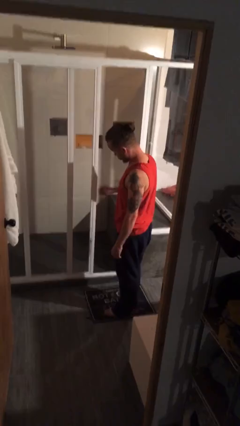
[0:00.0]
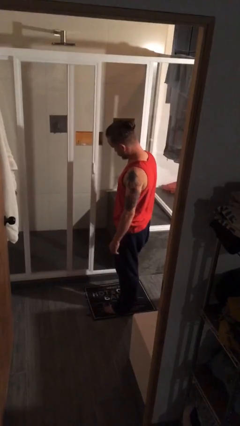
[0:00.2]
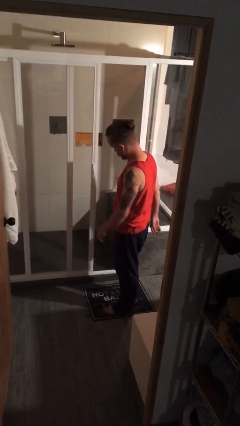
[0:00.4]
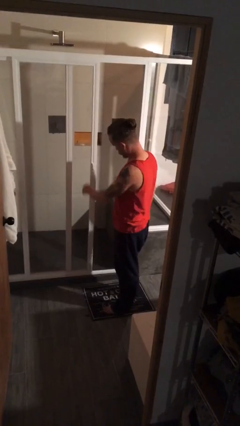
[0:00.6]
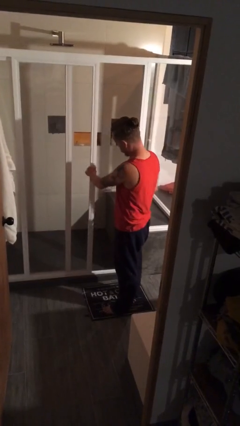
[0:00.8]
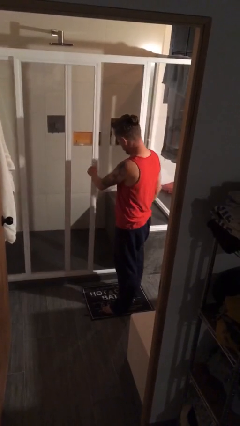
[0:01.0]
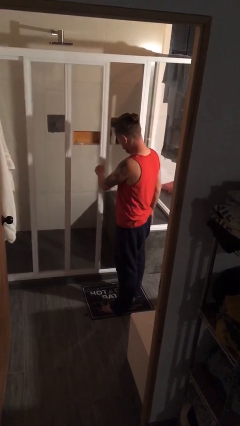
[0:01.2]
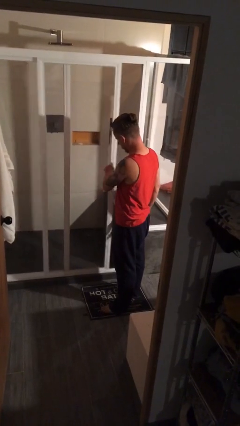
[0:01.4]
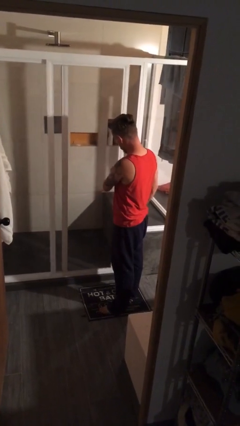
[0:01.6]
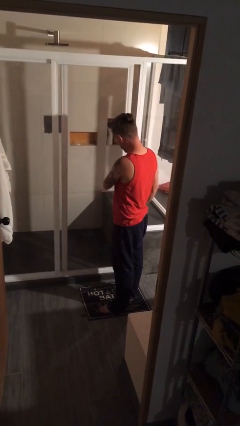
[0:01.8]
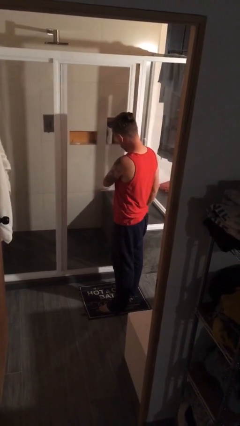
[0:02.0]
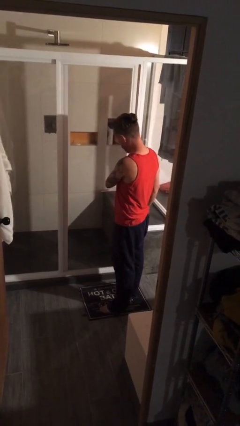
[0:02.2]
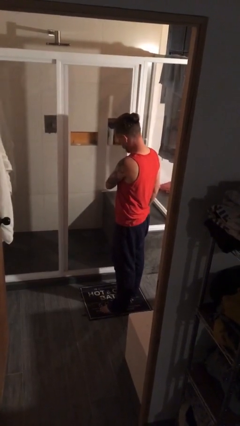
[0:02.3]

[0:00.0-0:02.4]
person closes sliding door

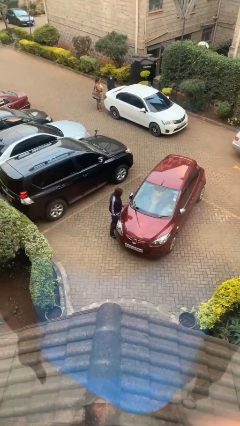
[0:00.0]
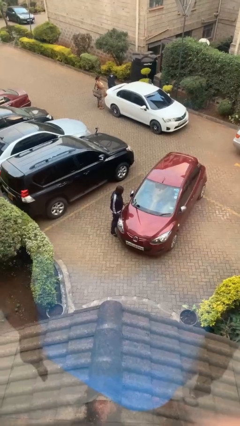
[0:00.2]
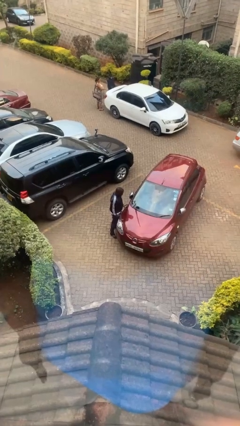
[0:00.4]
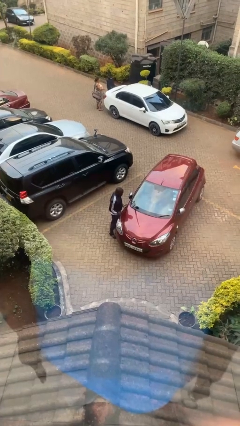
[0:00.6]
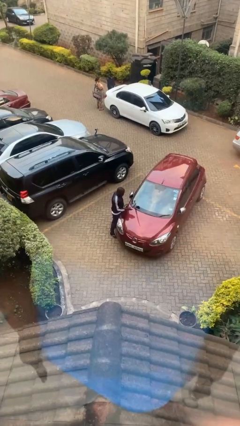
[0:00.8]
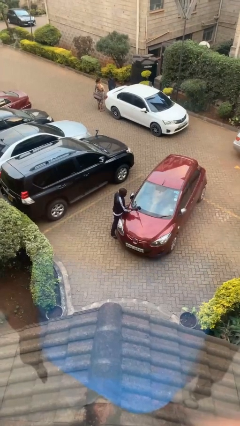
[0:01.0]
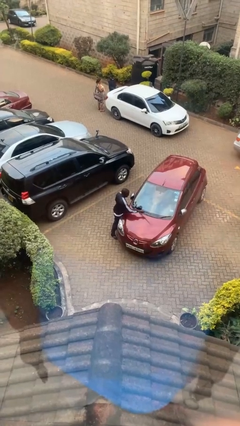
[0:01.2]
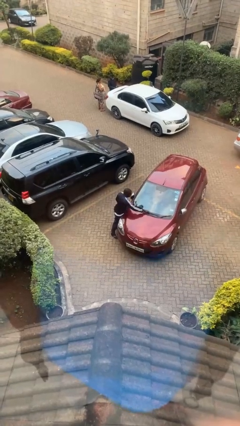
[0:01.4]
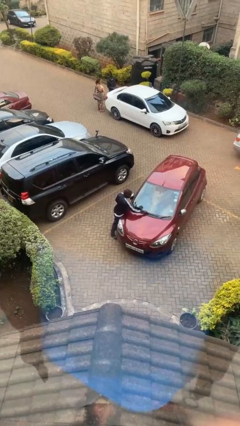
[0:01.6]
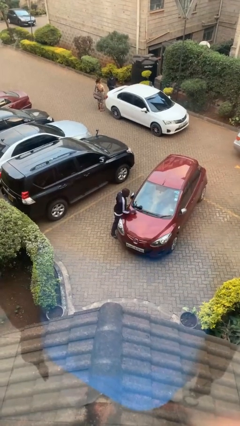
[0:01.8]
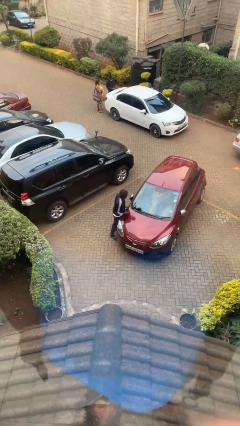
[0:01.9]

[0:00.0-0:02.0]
person flips down car wipers

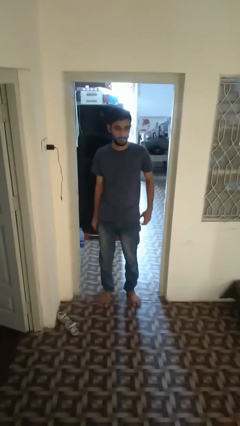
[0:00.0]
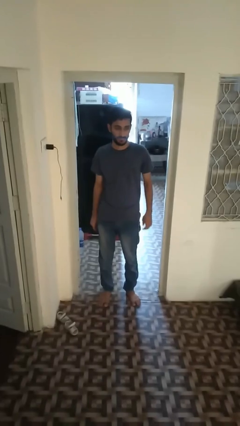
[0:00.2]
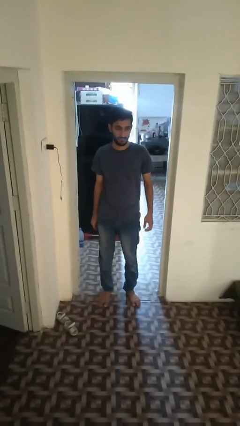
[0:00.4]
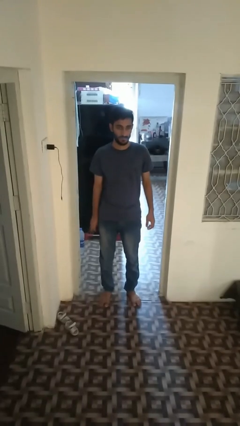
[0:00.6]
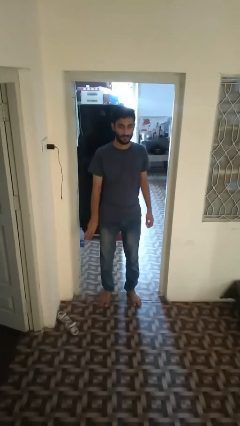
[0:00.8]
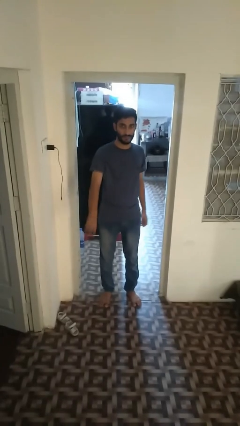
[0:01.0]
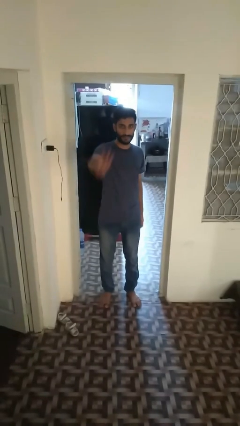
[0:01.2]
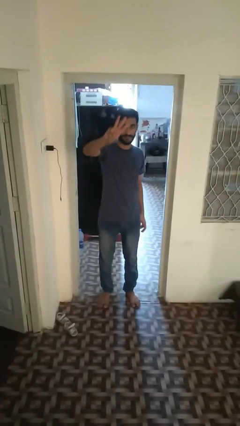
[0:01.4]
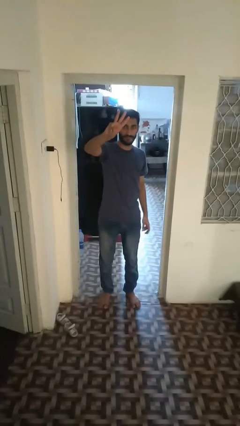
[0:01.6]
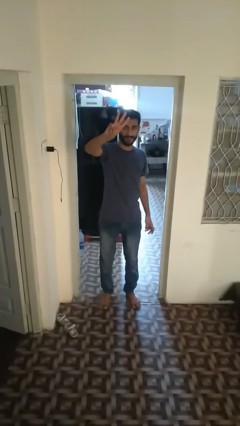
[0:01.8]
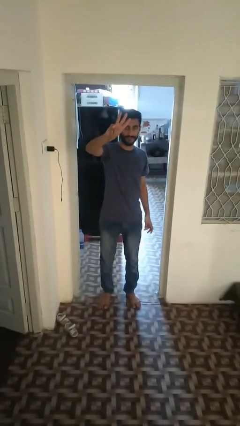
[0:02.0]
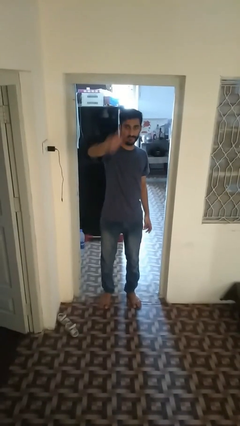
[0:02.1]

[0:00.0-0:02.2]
person gestures number three

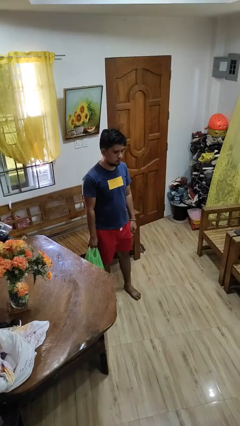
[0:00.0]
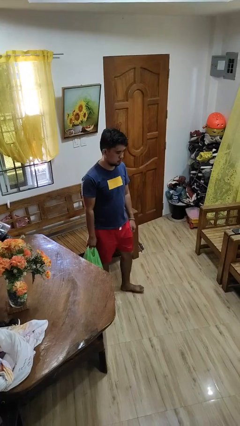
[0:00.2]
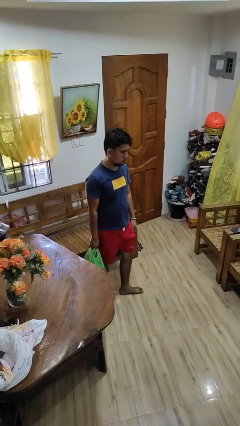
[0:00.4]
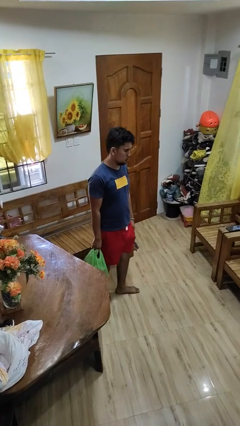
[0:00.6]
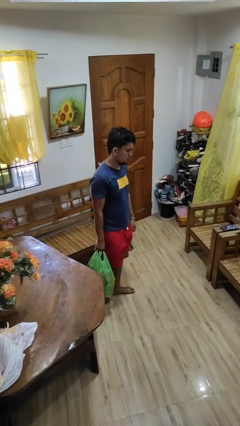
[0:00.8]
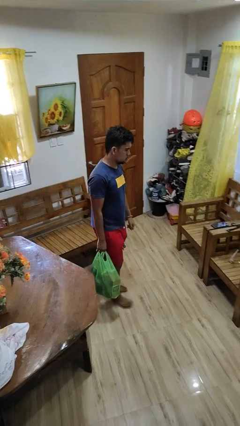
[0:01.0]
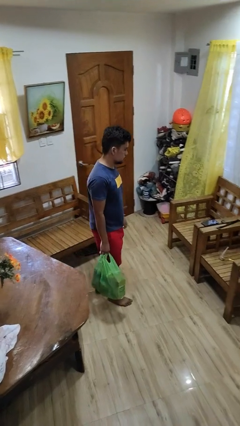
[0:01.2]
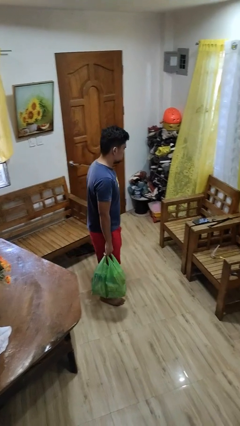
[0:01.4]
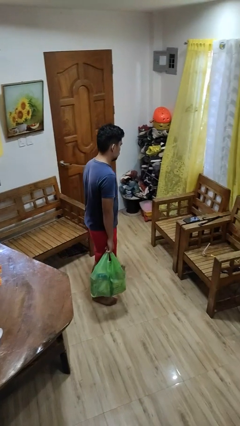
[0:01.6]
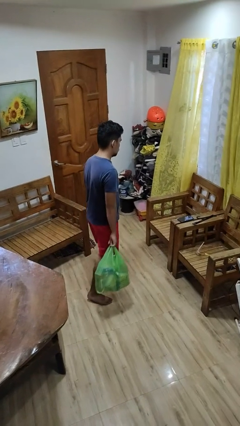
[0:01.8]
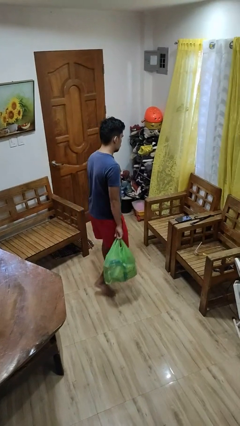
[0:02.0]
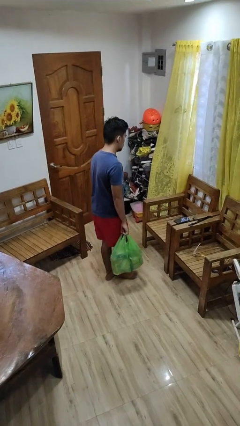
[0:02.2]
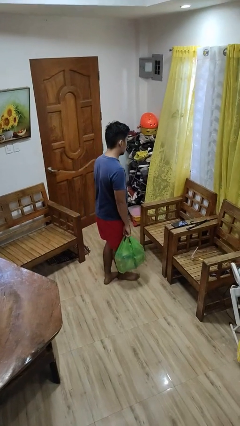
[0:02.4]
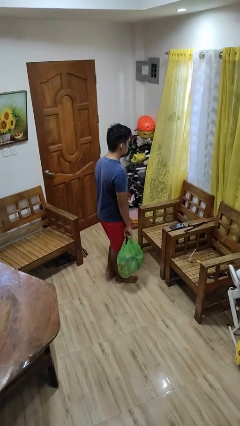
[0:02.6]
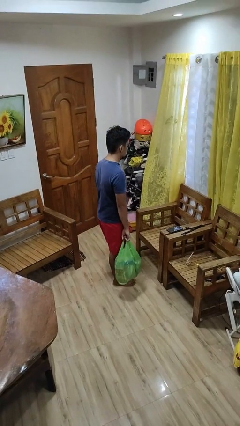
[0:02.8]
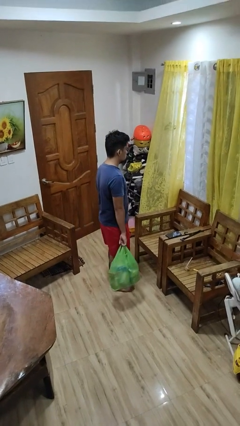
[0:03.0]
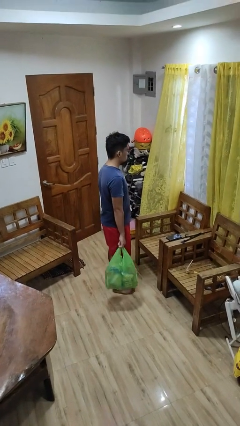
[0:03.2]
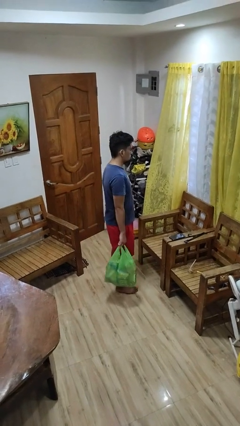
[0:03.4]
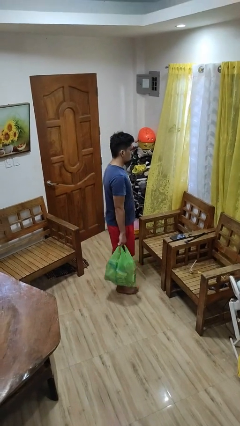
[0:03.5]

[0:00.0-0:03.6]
person carries groceries

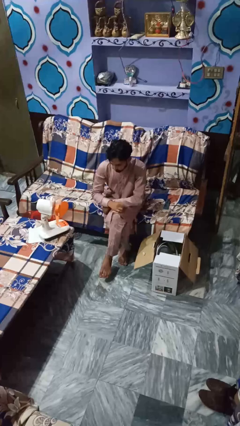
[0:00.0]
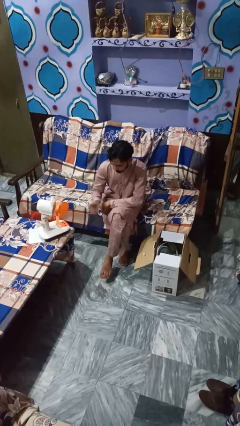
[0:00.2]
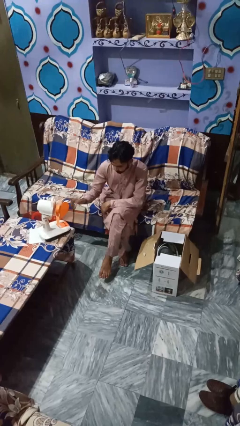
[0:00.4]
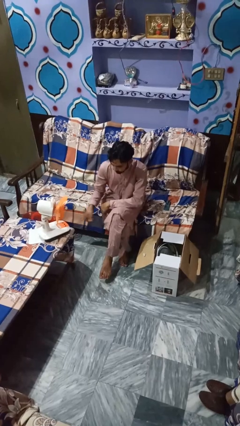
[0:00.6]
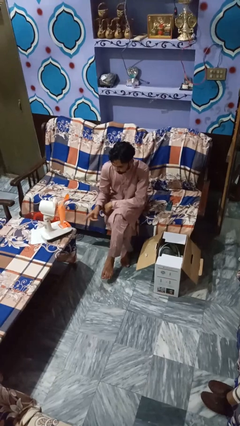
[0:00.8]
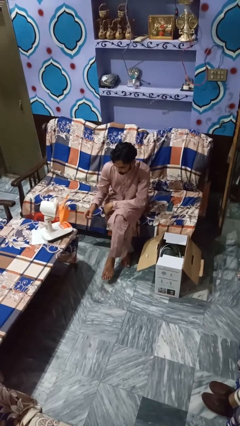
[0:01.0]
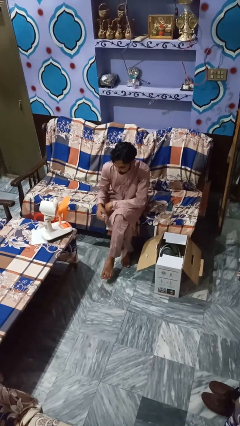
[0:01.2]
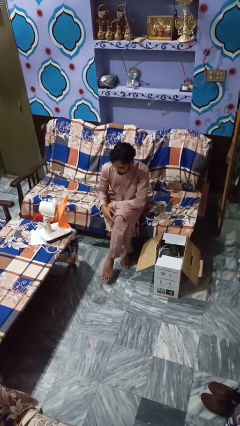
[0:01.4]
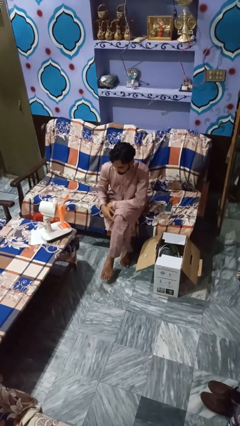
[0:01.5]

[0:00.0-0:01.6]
person turns on fan

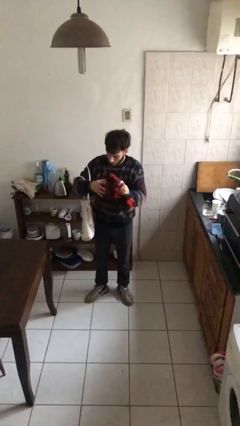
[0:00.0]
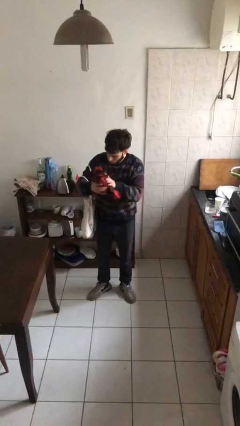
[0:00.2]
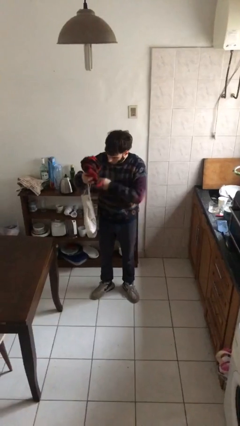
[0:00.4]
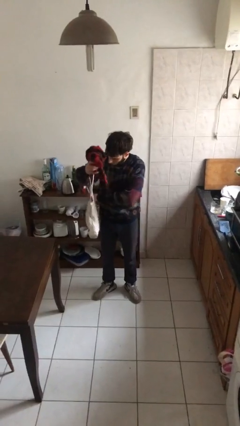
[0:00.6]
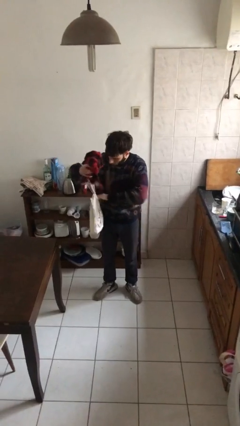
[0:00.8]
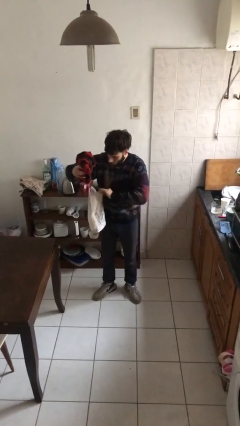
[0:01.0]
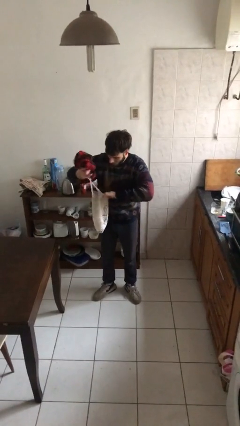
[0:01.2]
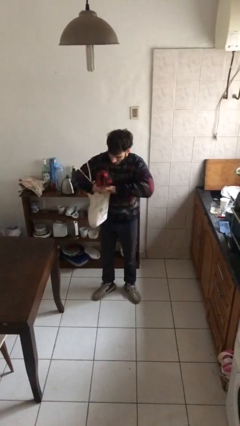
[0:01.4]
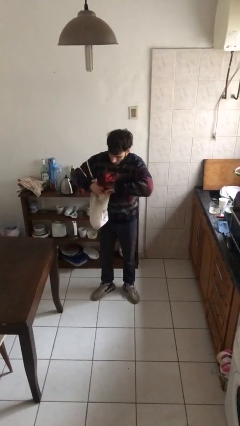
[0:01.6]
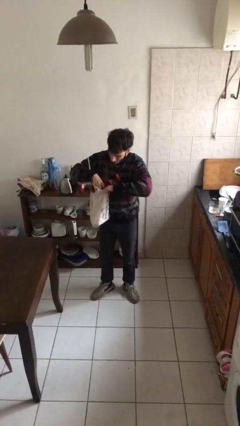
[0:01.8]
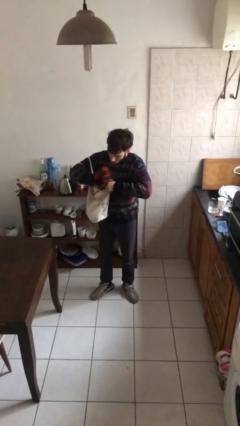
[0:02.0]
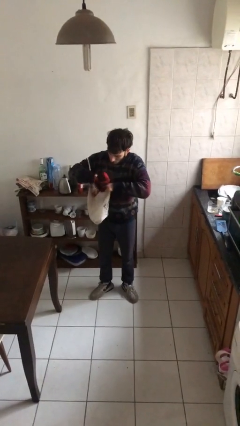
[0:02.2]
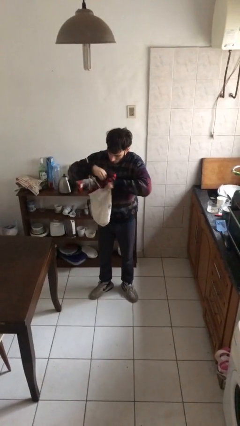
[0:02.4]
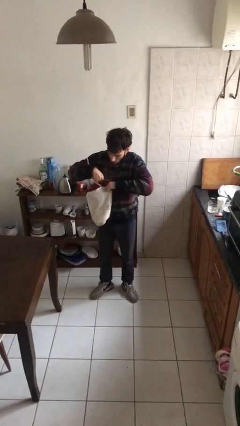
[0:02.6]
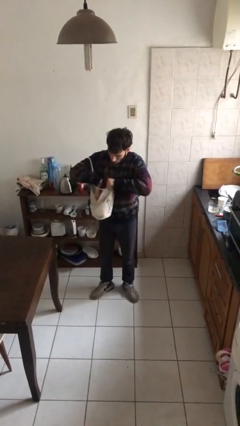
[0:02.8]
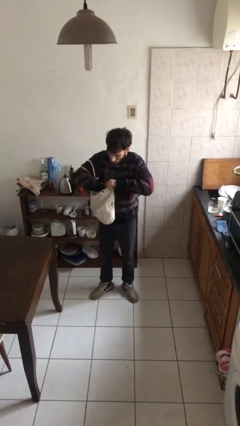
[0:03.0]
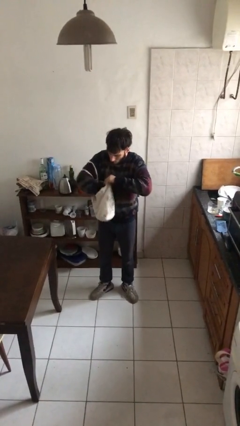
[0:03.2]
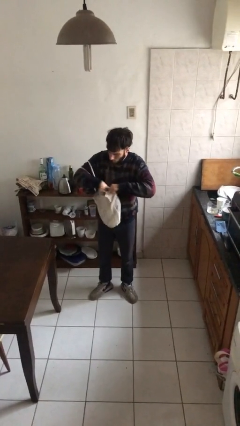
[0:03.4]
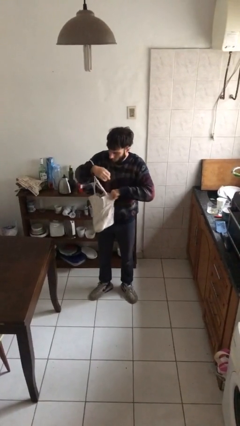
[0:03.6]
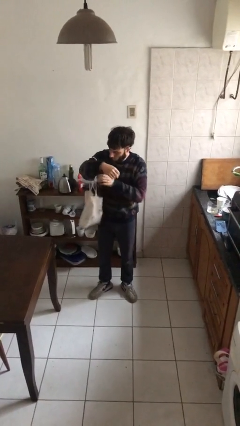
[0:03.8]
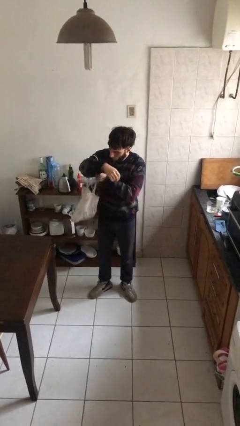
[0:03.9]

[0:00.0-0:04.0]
person puts object into purse

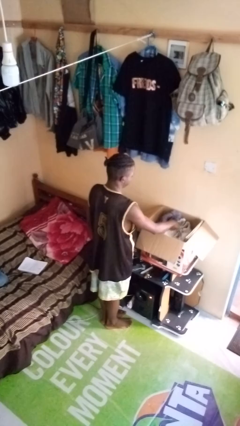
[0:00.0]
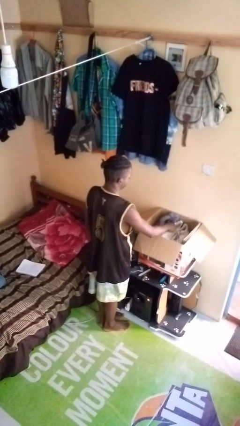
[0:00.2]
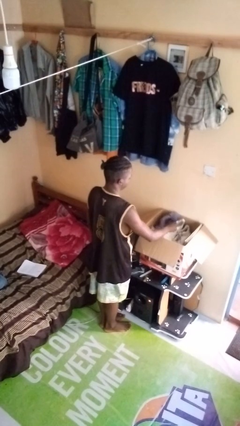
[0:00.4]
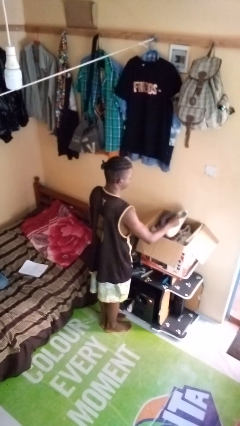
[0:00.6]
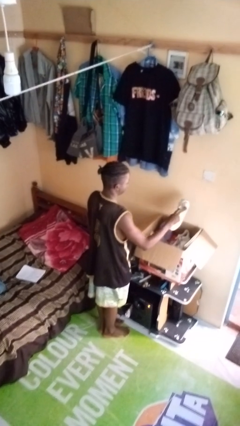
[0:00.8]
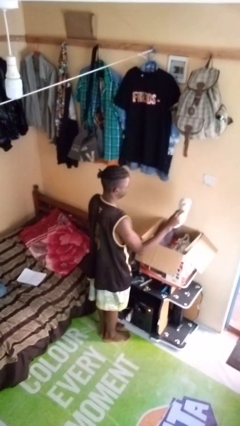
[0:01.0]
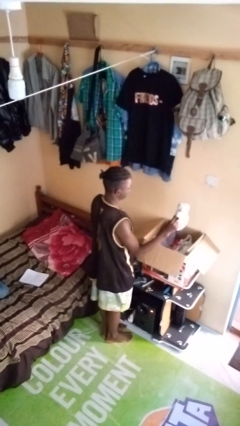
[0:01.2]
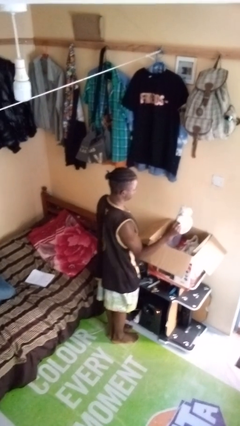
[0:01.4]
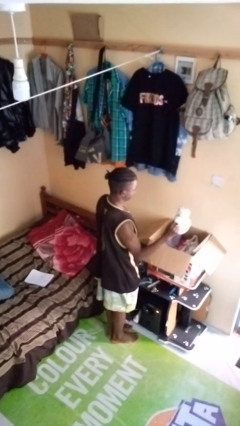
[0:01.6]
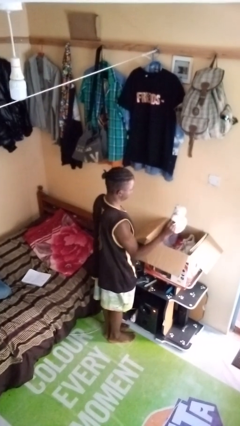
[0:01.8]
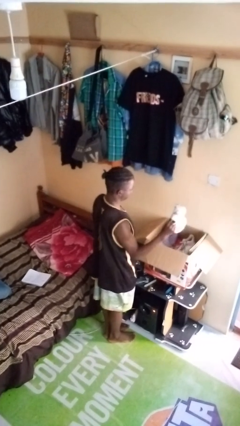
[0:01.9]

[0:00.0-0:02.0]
person takes object from box
